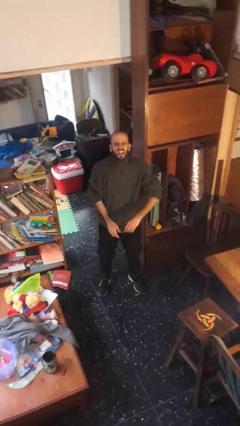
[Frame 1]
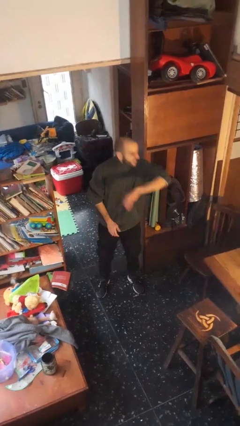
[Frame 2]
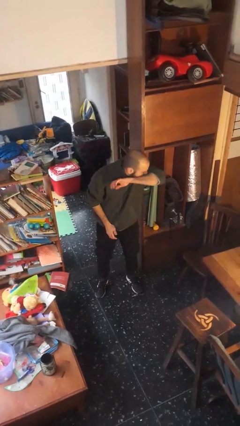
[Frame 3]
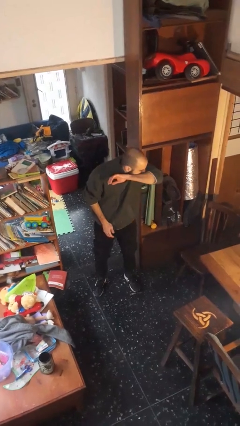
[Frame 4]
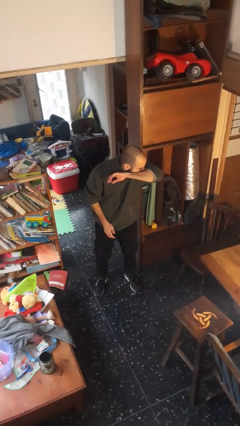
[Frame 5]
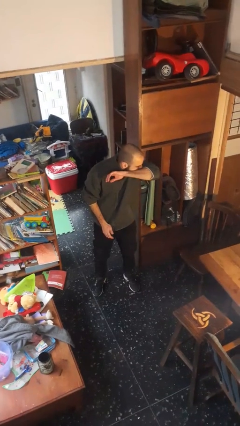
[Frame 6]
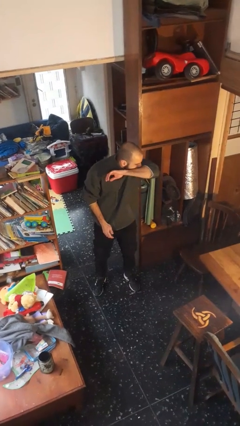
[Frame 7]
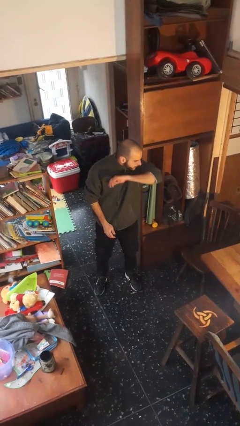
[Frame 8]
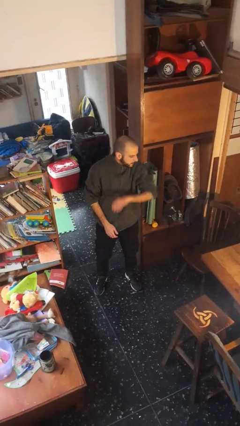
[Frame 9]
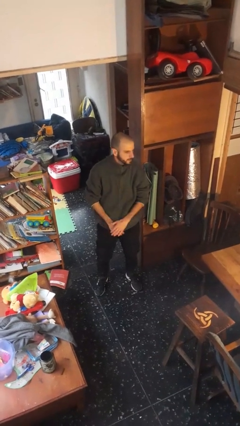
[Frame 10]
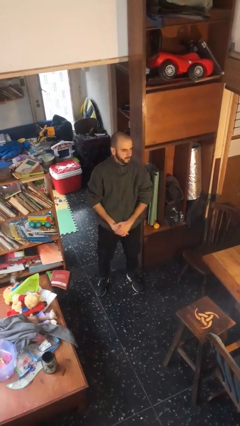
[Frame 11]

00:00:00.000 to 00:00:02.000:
person sneezes into arm

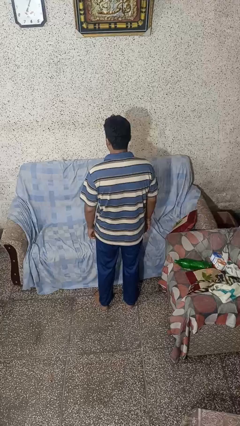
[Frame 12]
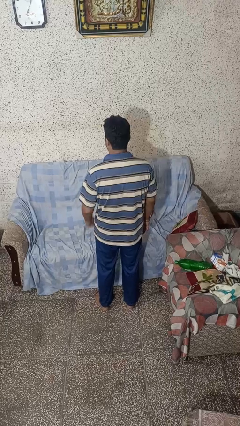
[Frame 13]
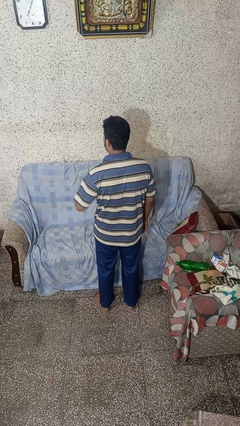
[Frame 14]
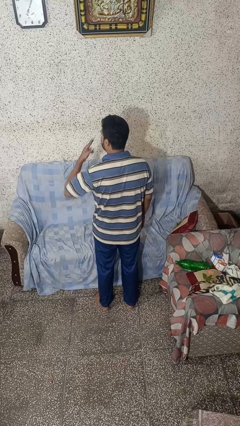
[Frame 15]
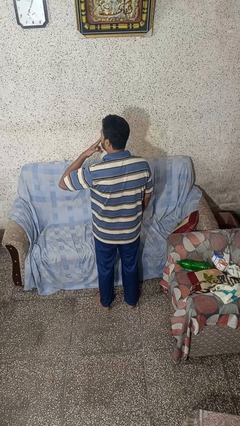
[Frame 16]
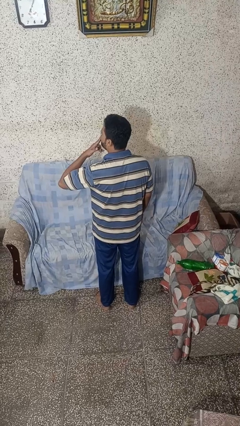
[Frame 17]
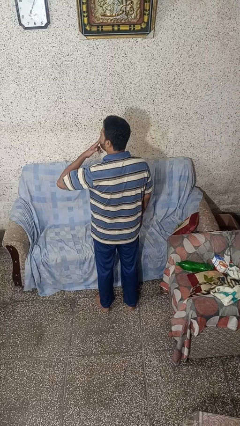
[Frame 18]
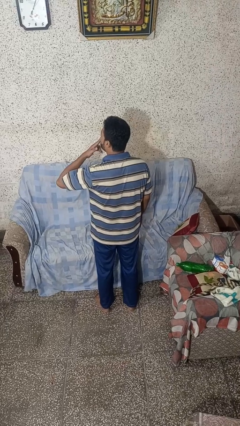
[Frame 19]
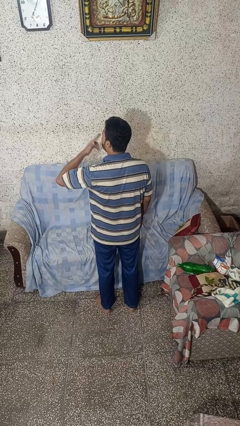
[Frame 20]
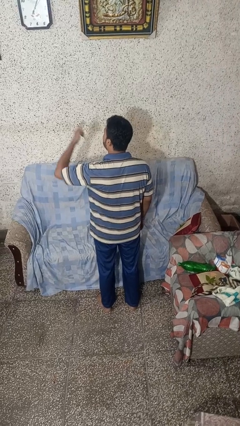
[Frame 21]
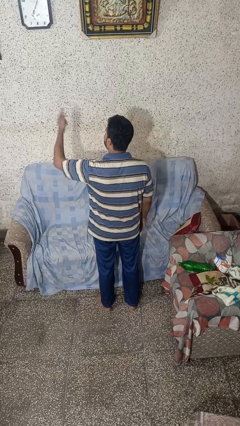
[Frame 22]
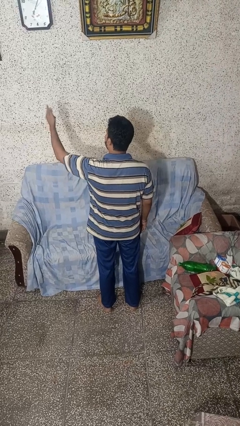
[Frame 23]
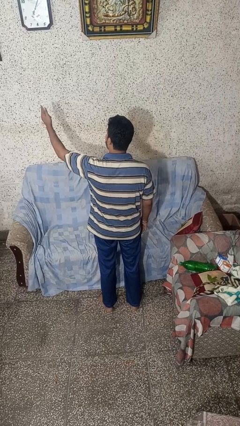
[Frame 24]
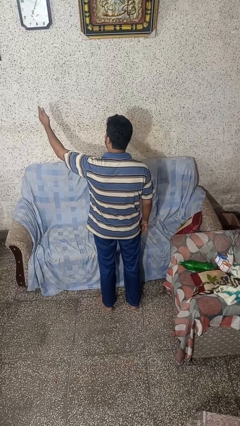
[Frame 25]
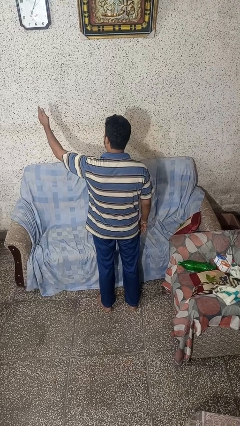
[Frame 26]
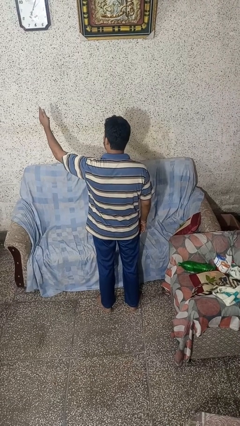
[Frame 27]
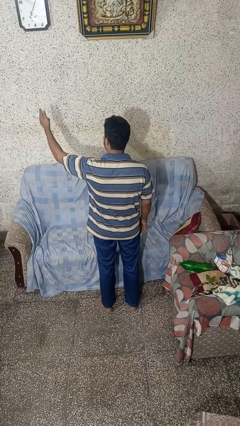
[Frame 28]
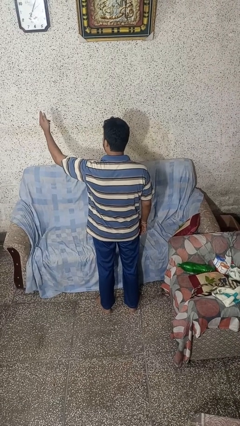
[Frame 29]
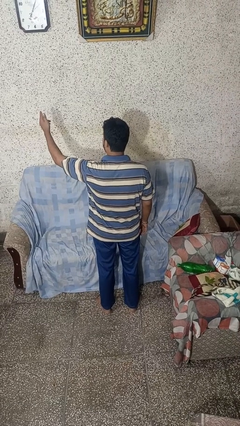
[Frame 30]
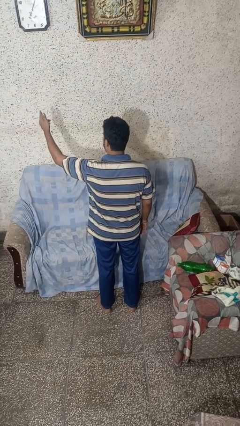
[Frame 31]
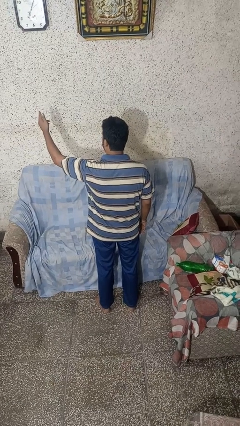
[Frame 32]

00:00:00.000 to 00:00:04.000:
person gestures blow kiss

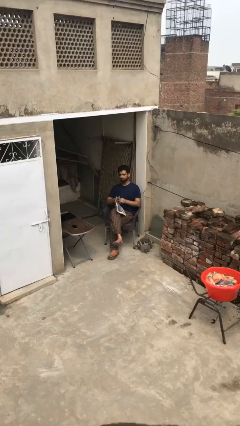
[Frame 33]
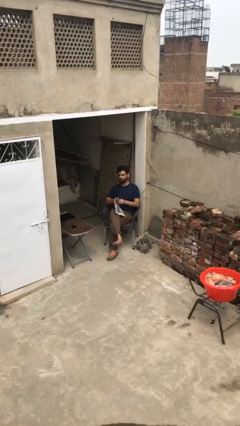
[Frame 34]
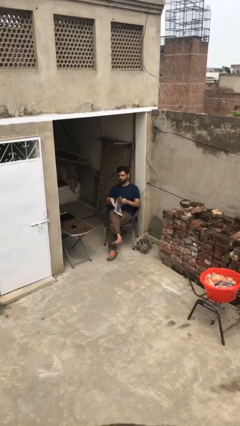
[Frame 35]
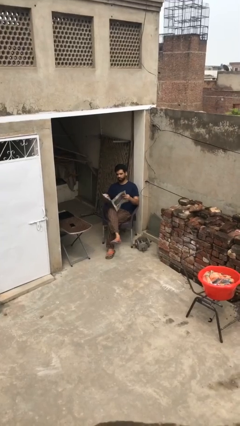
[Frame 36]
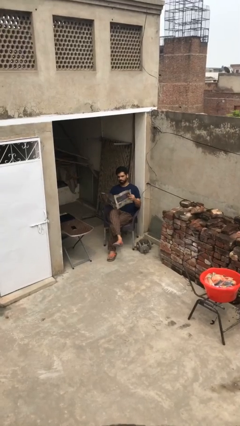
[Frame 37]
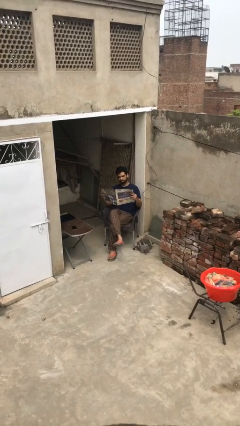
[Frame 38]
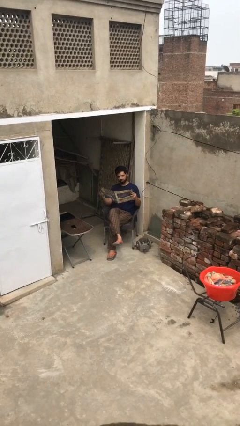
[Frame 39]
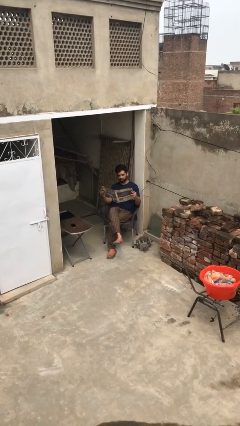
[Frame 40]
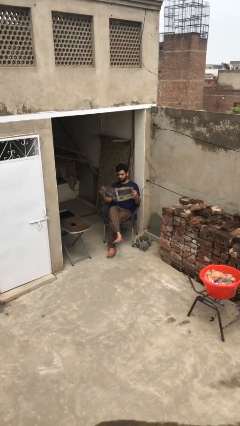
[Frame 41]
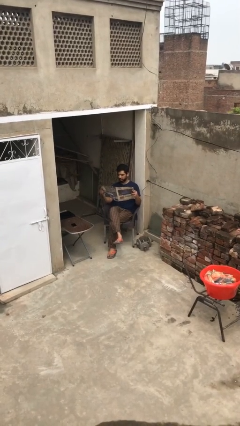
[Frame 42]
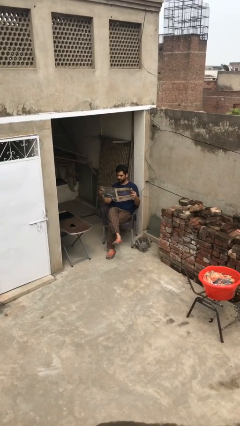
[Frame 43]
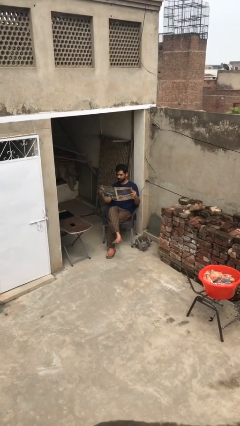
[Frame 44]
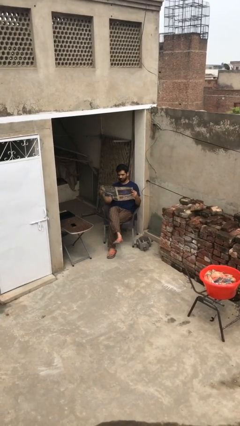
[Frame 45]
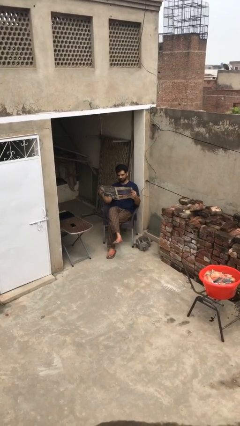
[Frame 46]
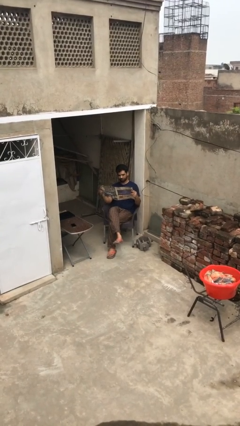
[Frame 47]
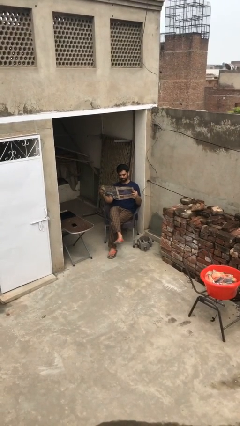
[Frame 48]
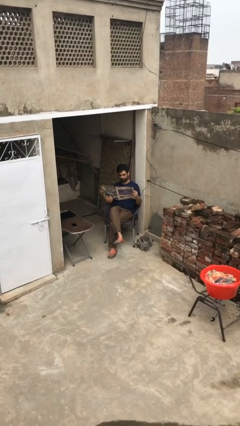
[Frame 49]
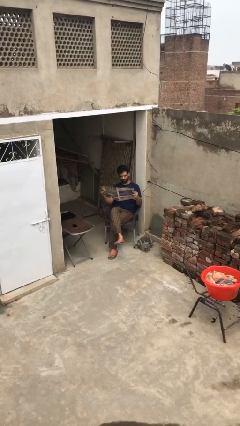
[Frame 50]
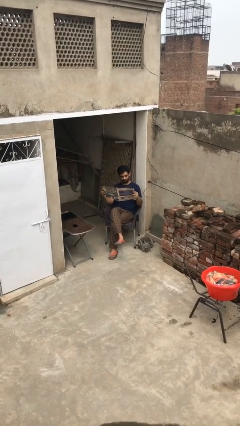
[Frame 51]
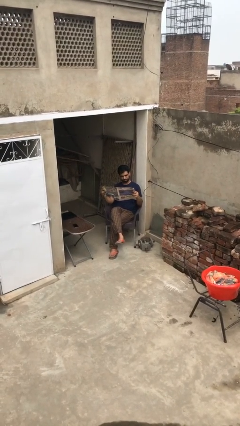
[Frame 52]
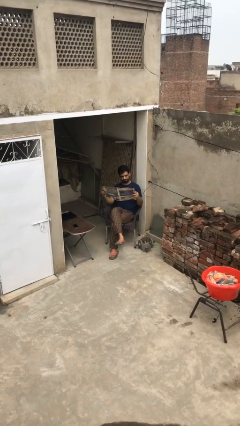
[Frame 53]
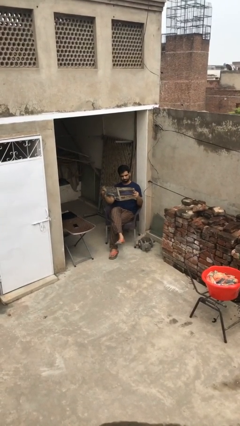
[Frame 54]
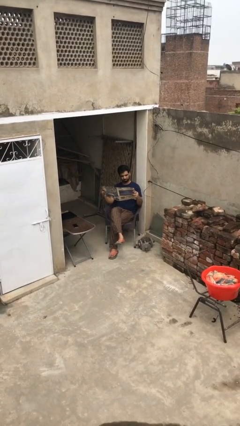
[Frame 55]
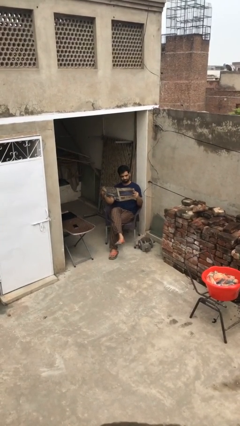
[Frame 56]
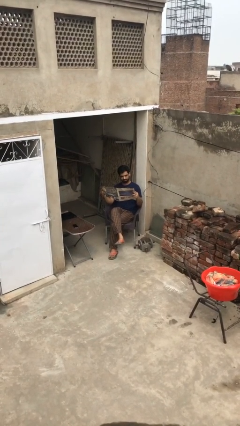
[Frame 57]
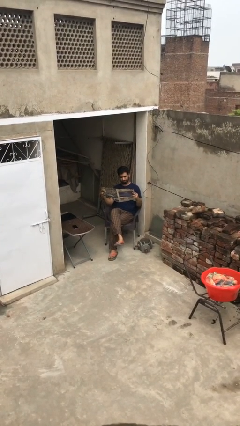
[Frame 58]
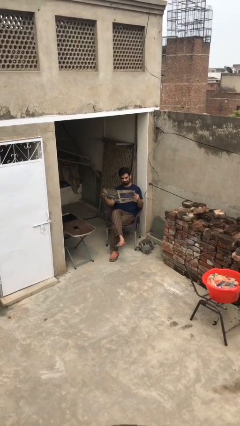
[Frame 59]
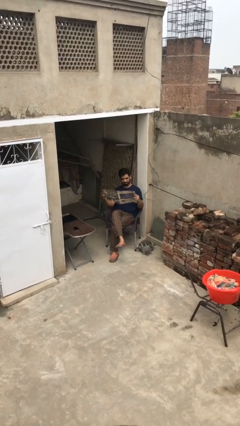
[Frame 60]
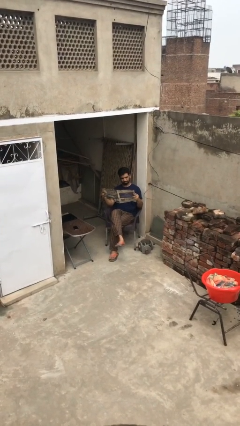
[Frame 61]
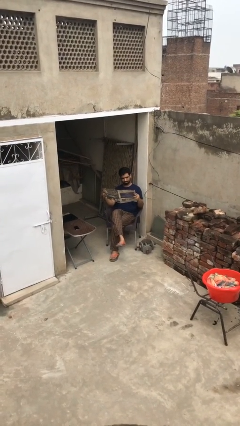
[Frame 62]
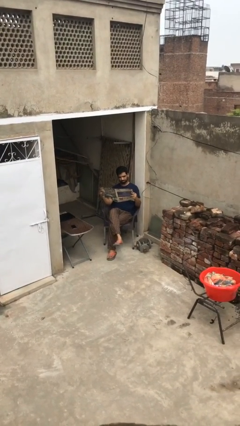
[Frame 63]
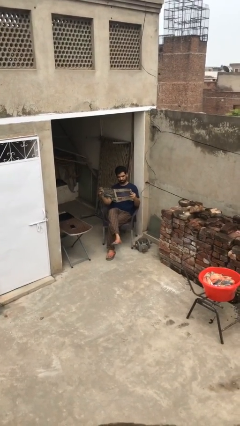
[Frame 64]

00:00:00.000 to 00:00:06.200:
person reads document

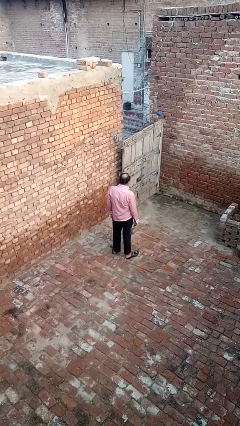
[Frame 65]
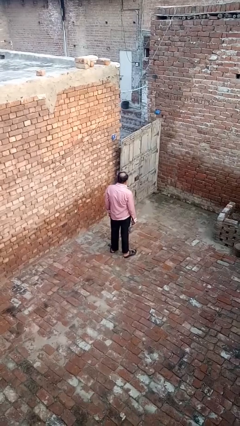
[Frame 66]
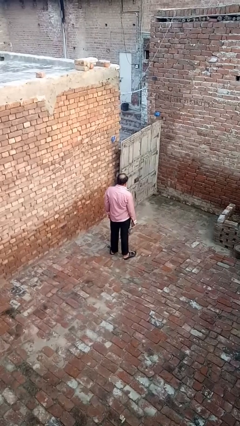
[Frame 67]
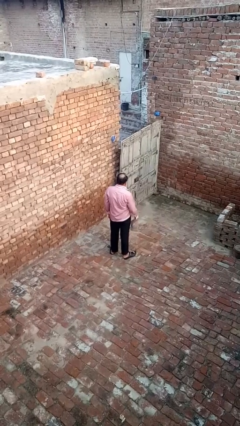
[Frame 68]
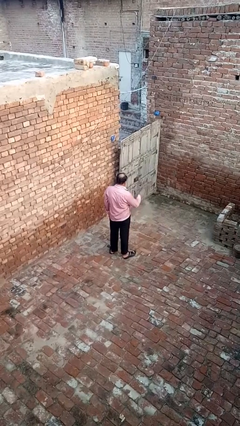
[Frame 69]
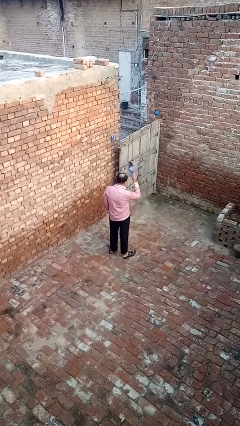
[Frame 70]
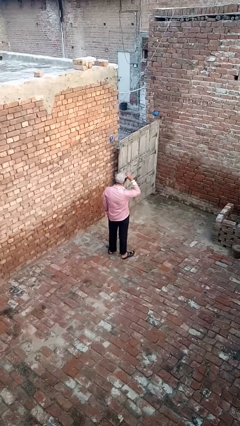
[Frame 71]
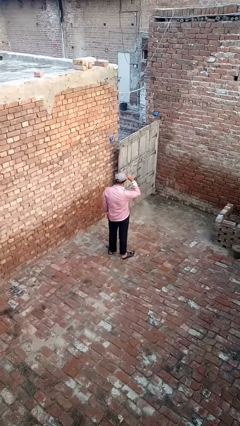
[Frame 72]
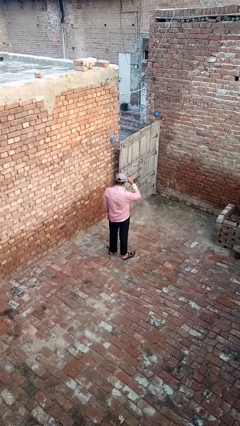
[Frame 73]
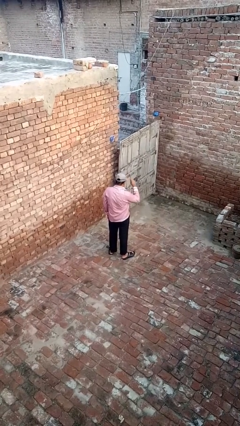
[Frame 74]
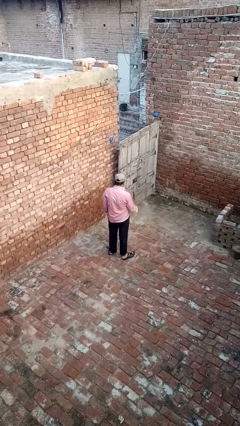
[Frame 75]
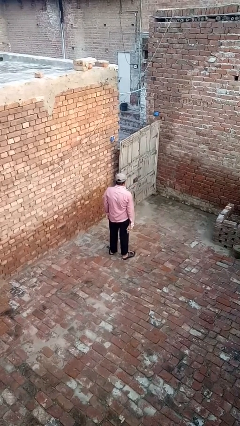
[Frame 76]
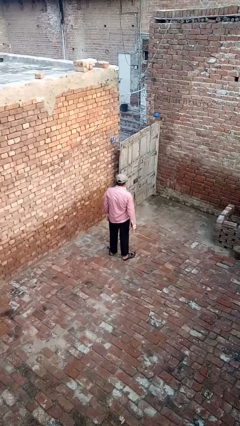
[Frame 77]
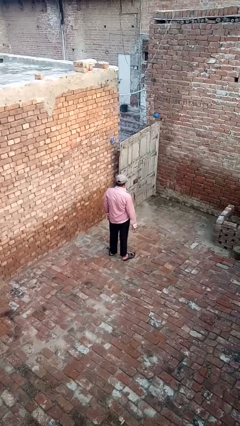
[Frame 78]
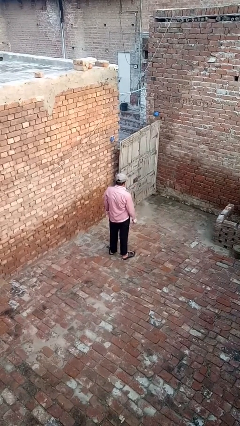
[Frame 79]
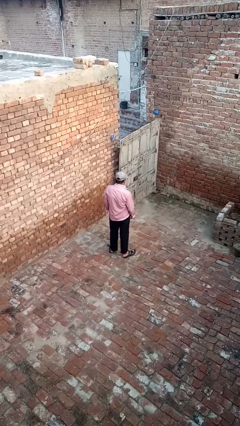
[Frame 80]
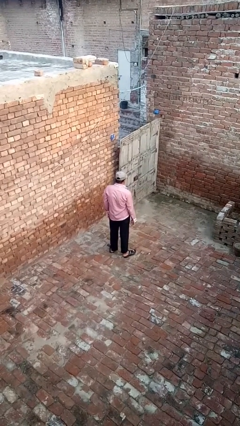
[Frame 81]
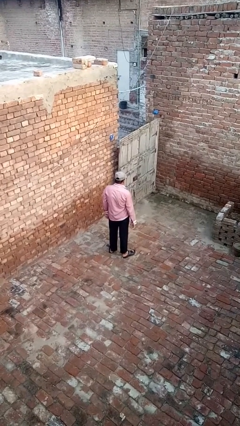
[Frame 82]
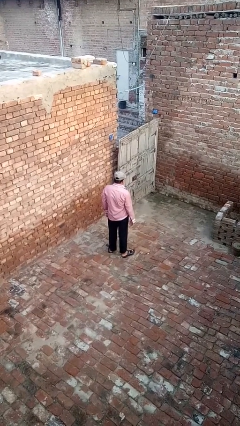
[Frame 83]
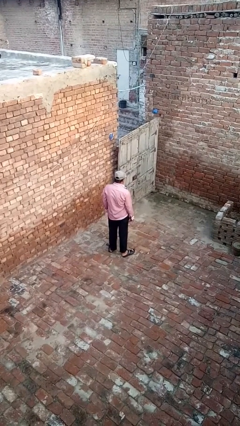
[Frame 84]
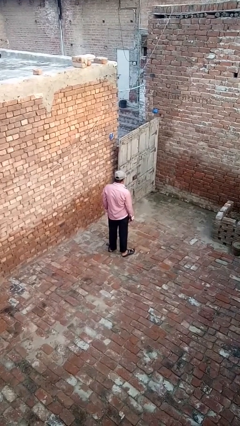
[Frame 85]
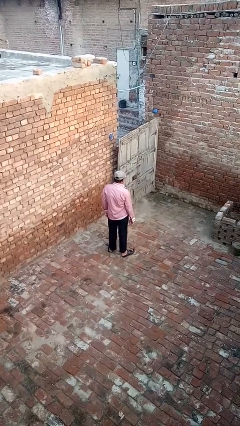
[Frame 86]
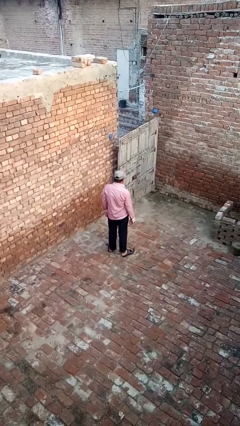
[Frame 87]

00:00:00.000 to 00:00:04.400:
person puts on hat

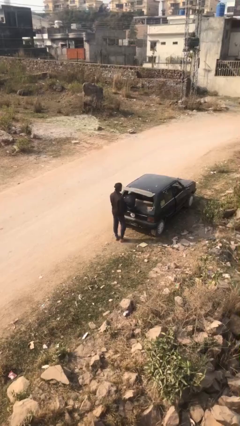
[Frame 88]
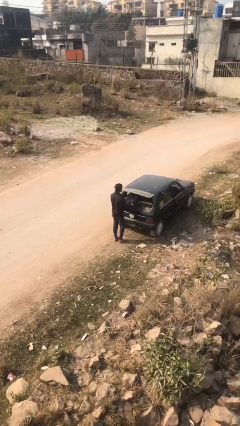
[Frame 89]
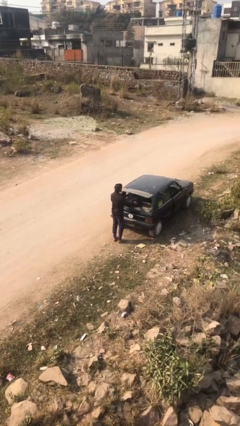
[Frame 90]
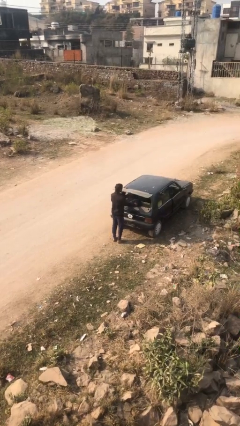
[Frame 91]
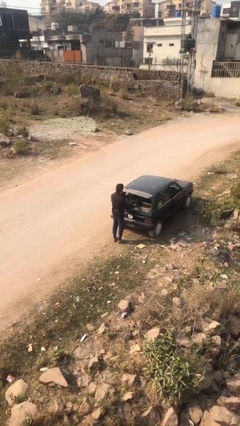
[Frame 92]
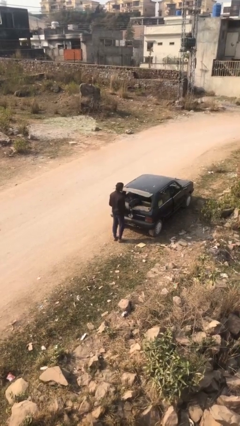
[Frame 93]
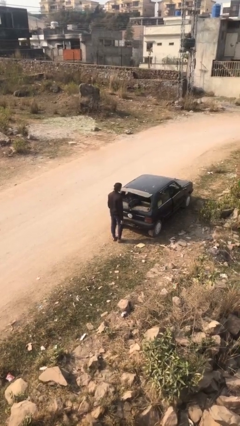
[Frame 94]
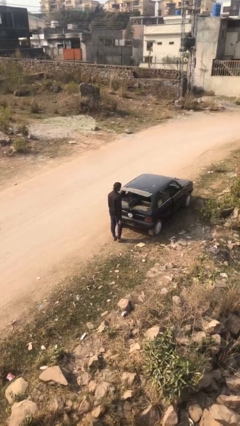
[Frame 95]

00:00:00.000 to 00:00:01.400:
person loads car
